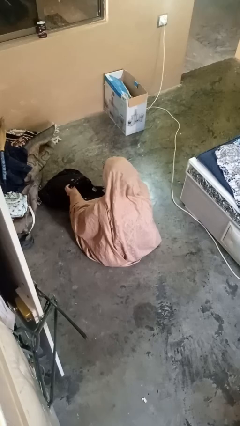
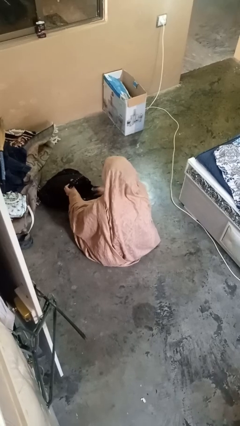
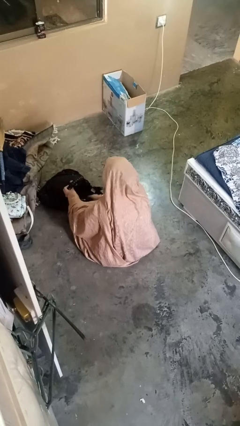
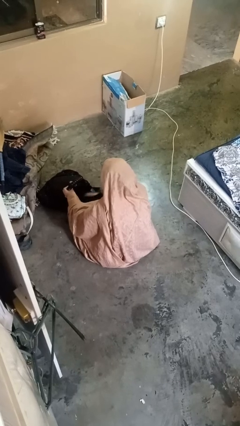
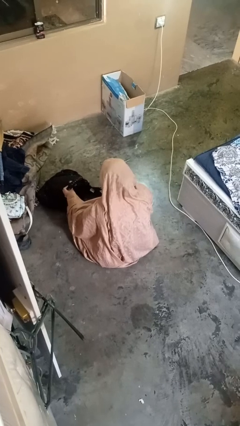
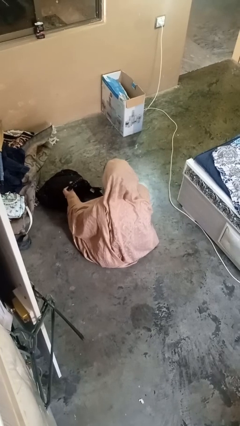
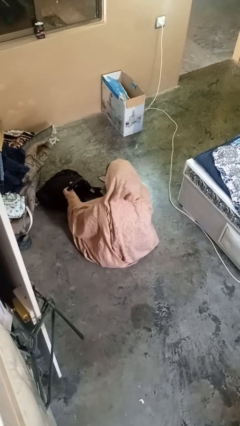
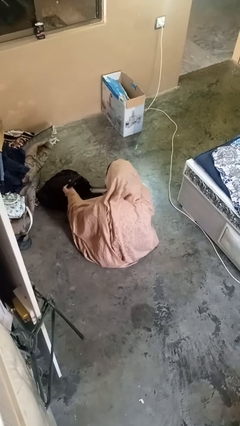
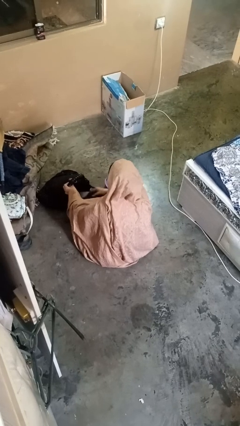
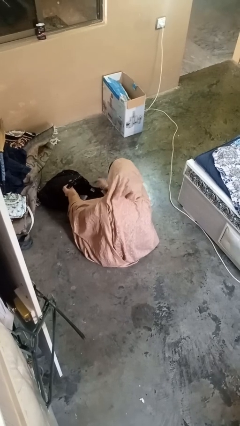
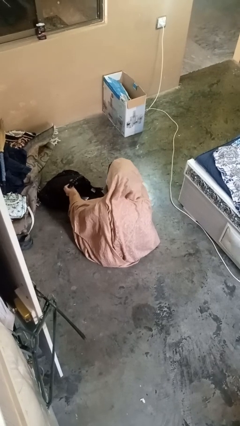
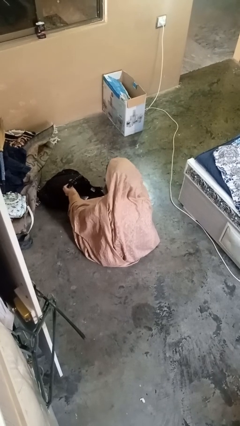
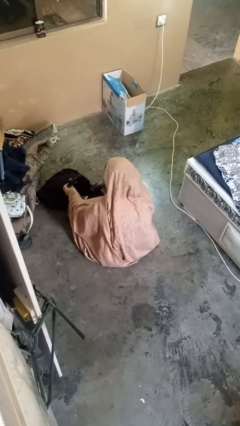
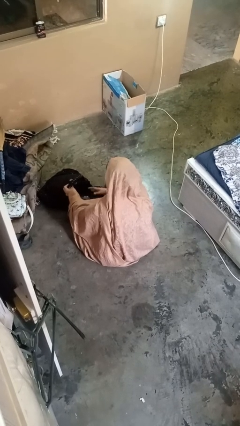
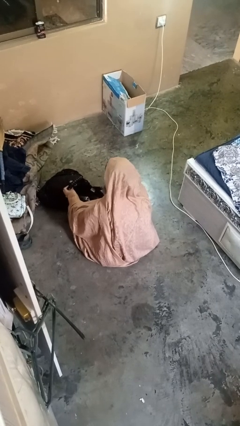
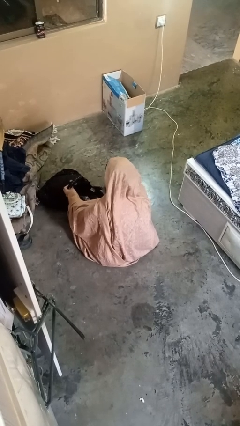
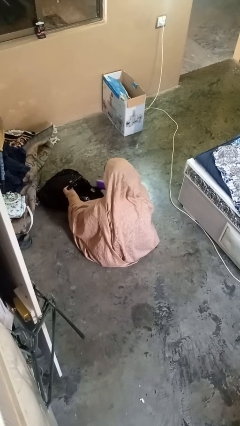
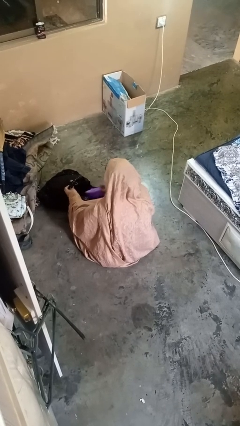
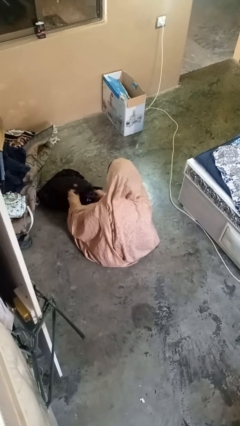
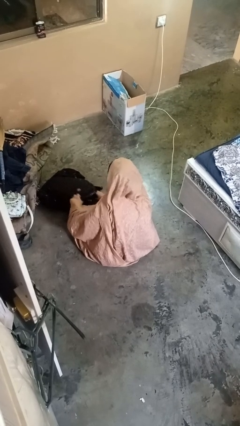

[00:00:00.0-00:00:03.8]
person puts object into backpack

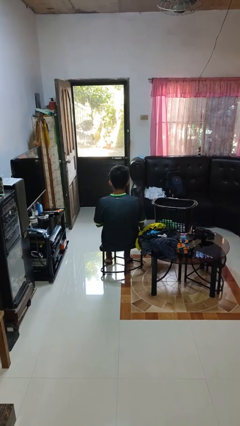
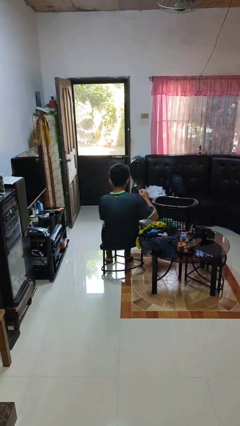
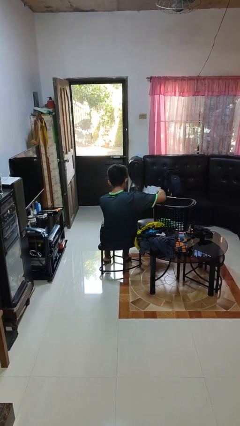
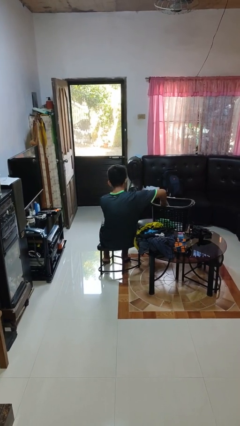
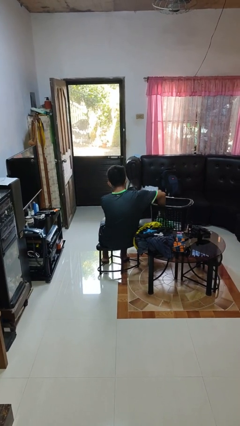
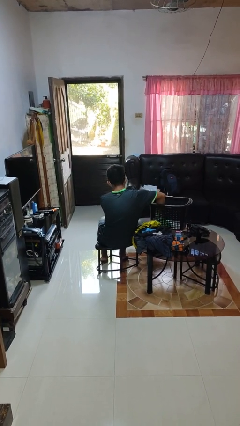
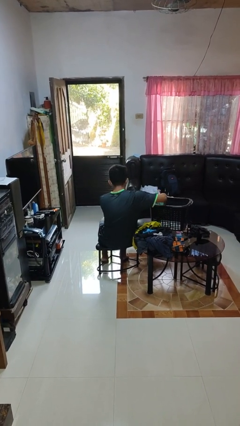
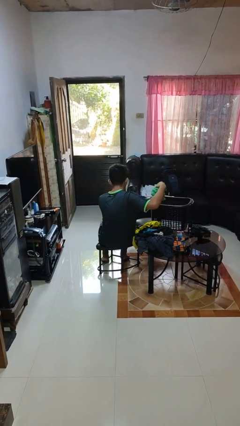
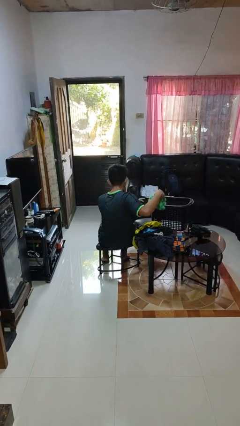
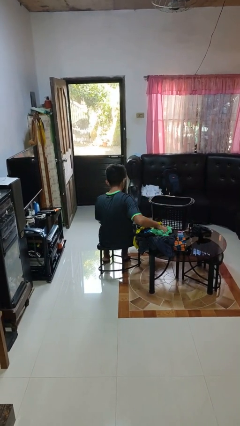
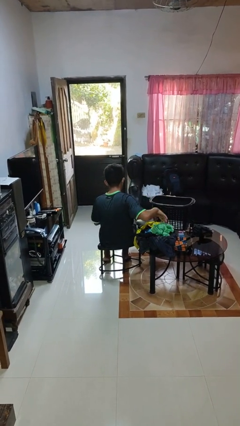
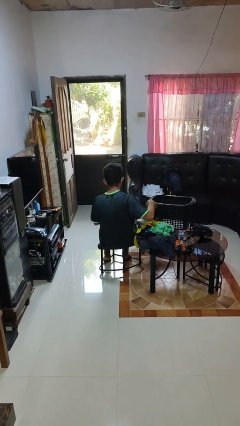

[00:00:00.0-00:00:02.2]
person takes object from basket

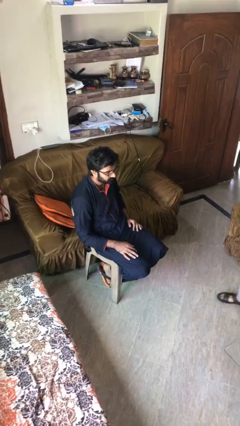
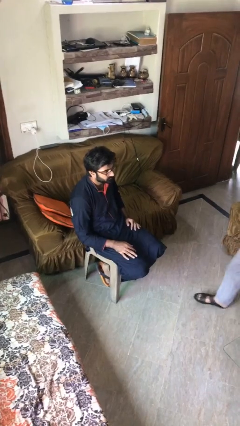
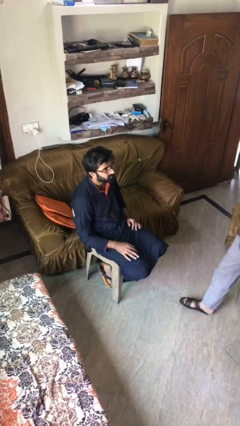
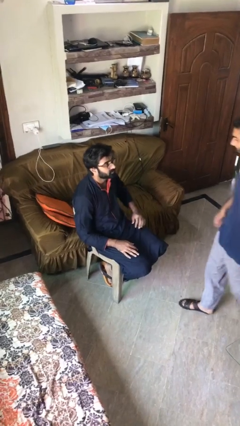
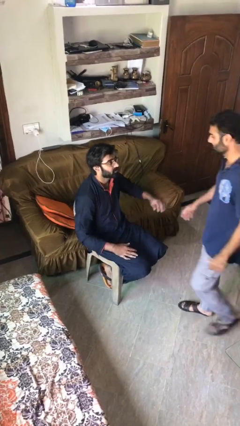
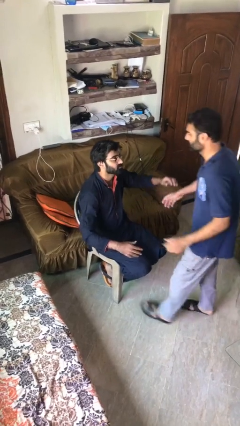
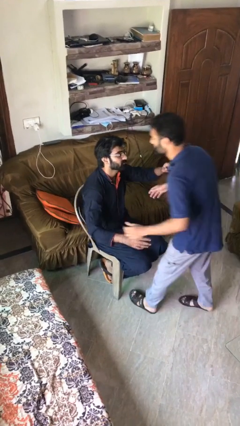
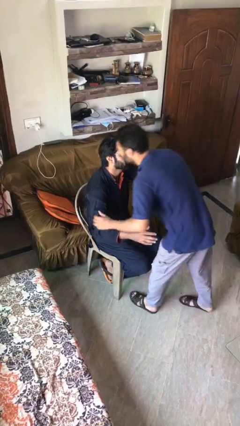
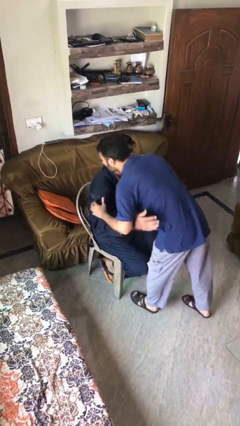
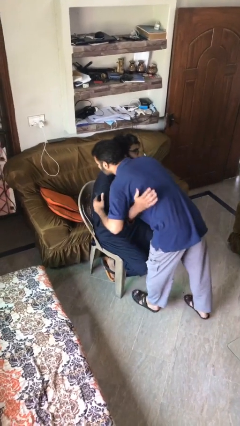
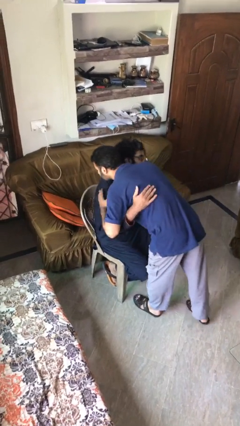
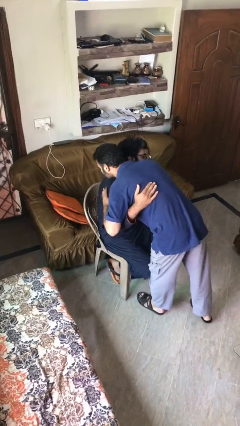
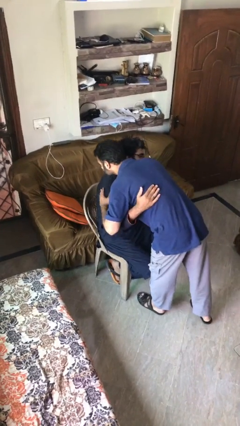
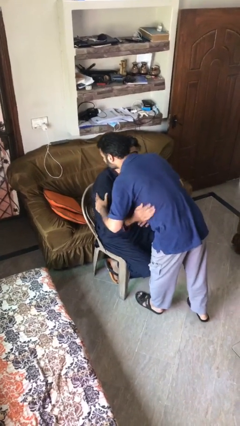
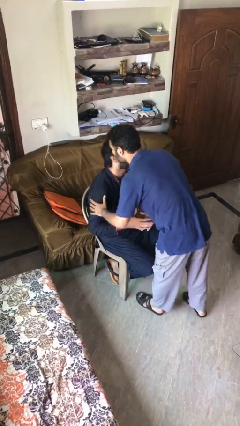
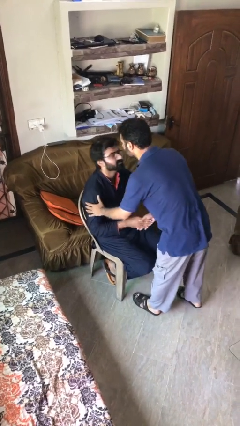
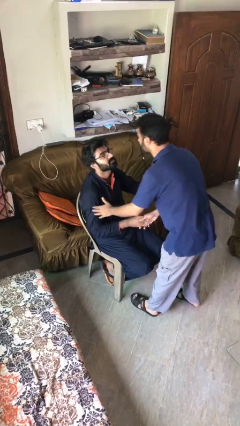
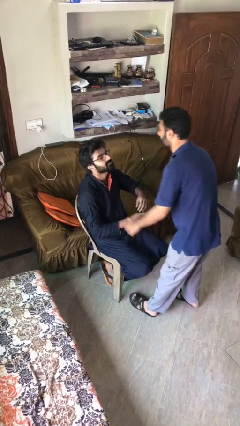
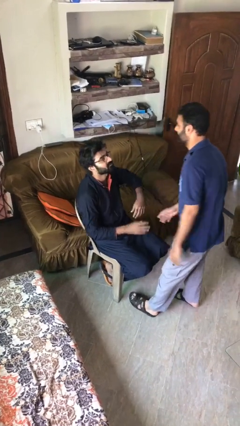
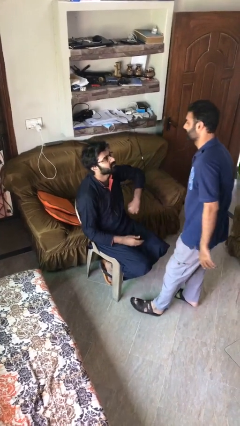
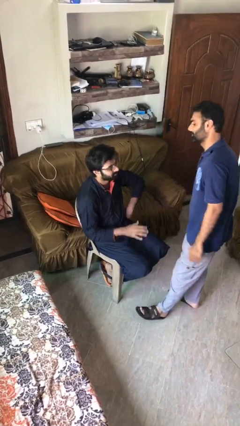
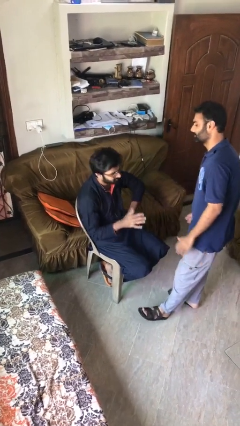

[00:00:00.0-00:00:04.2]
person embraces person

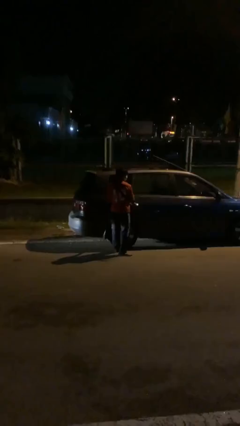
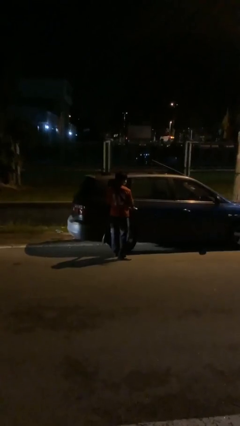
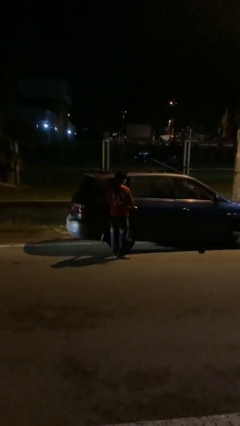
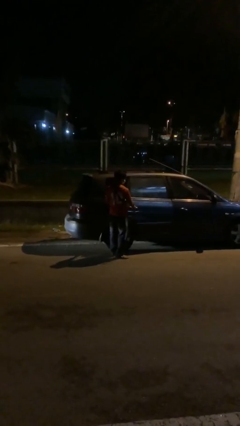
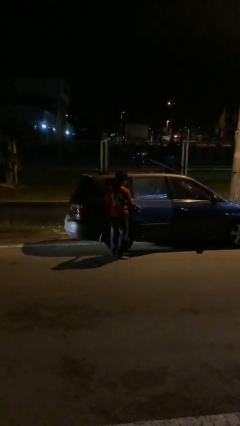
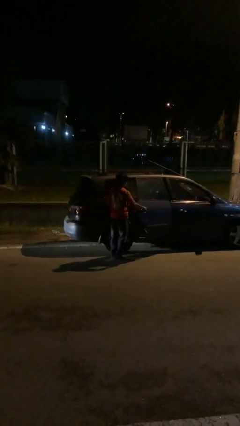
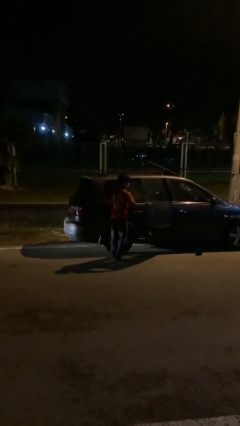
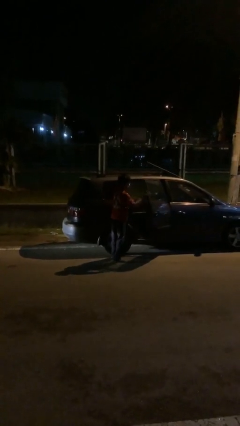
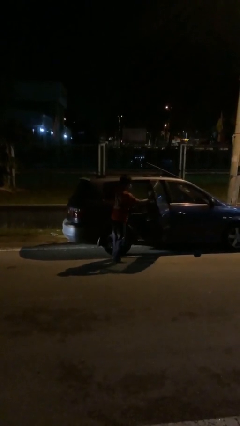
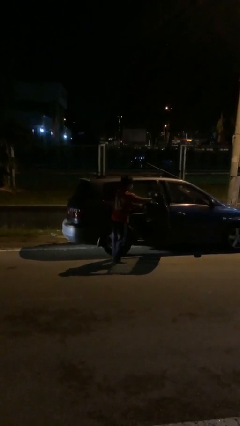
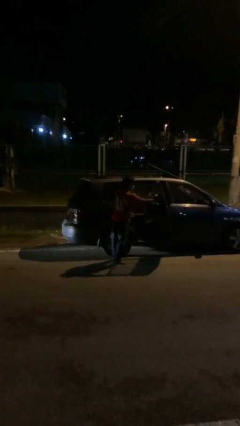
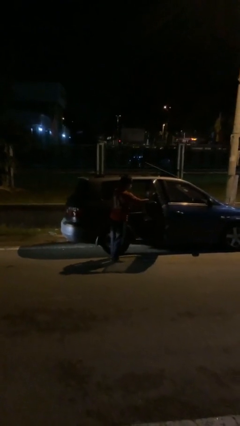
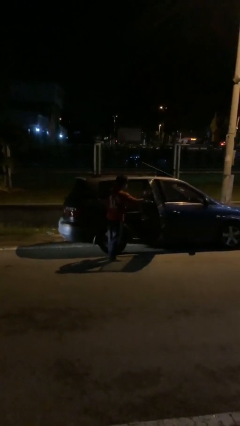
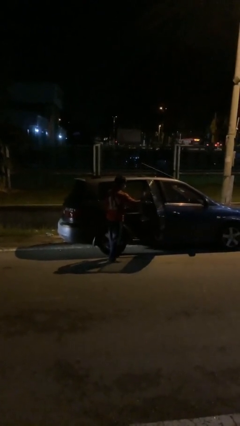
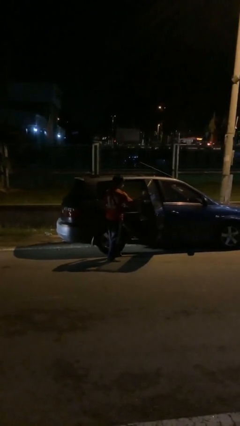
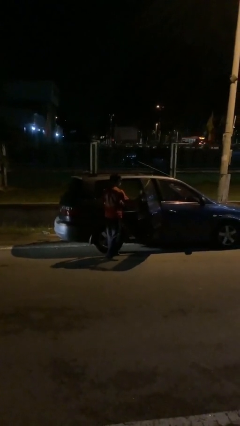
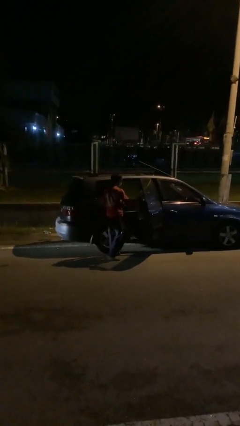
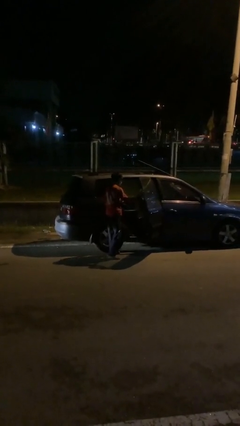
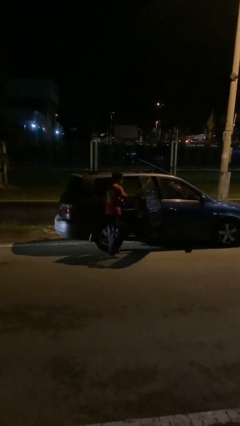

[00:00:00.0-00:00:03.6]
person opens car door

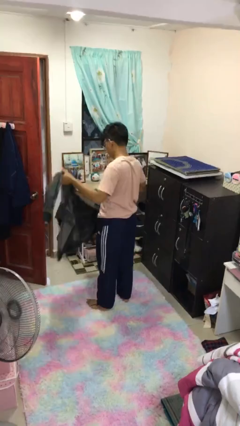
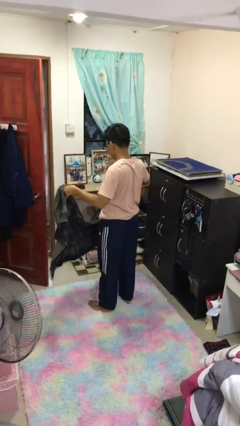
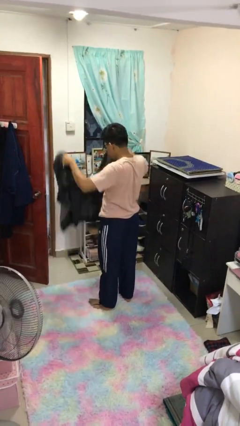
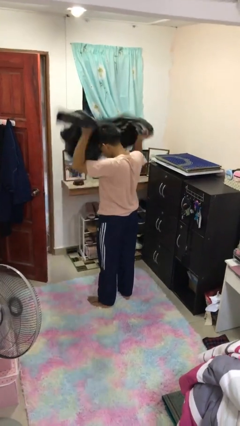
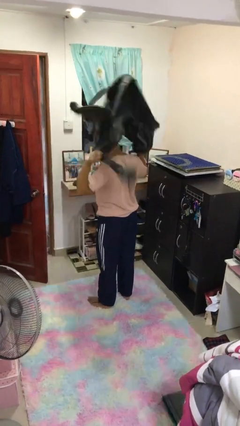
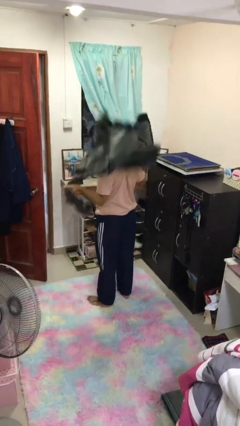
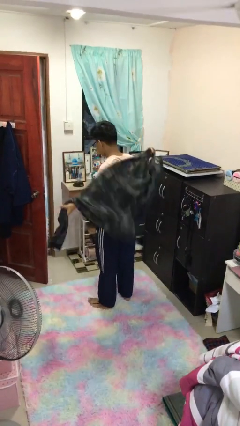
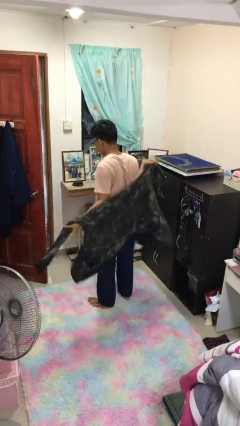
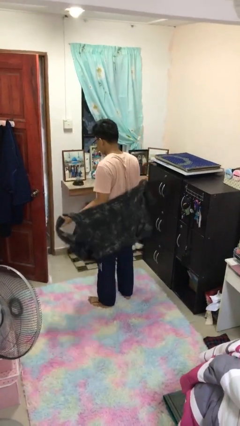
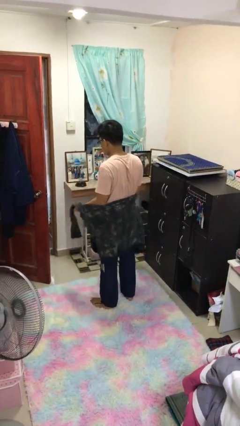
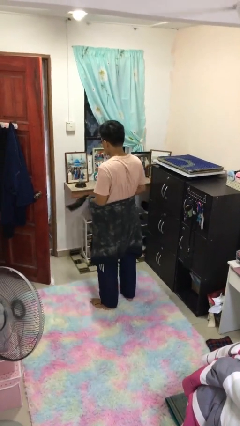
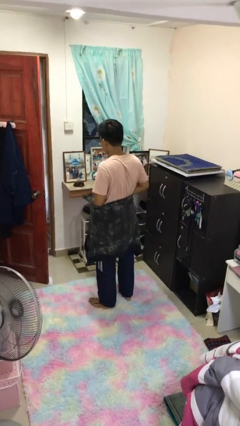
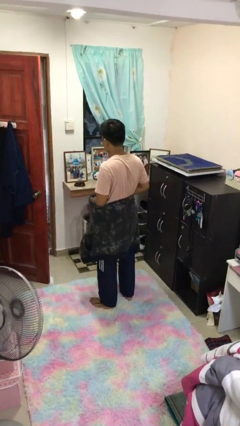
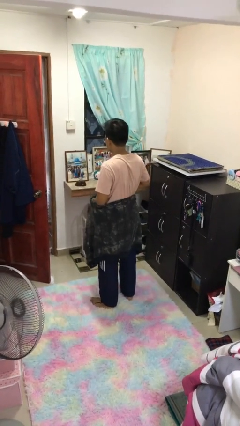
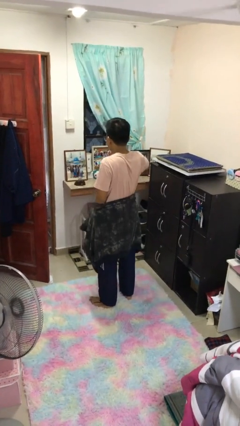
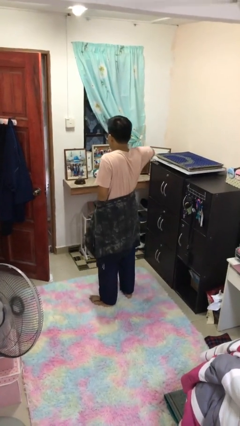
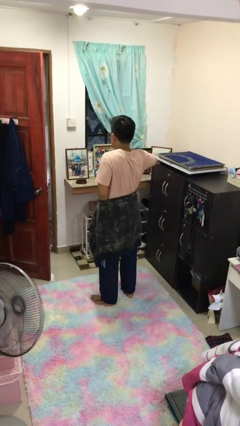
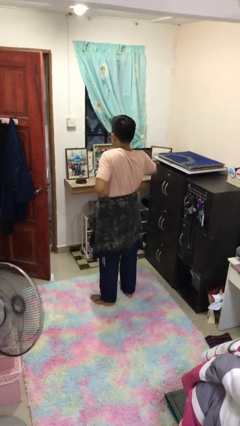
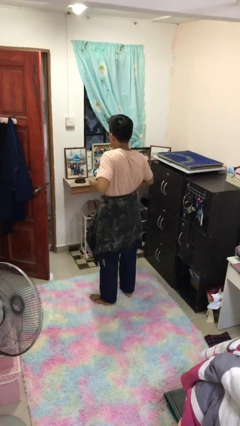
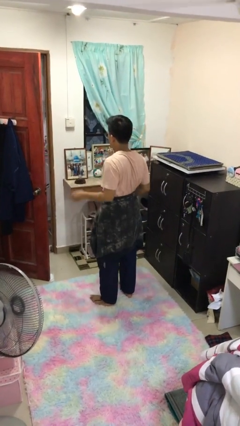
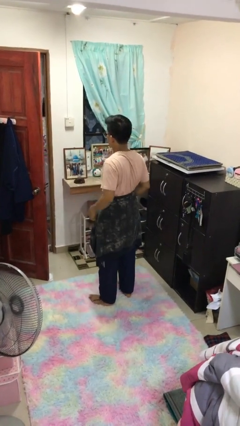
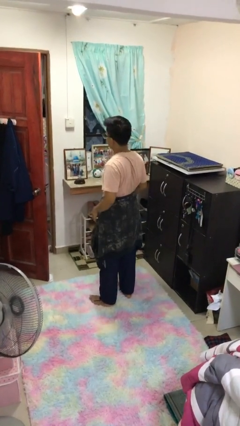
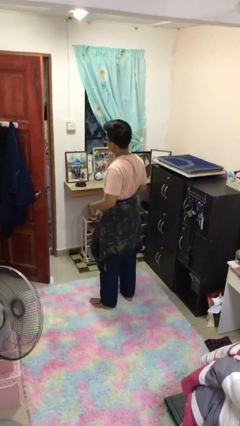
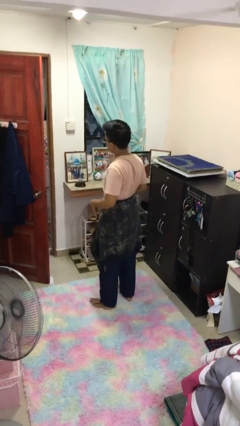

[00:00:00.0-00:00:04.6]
person ties jacket around waist
